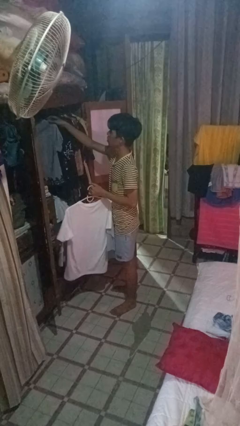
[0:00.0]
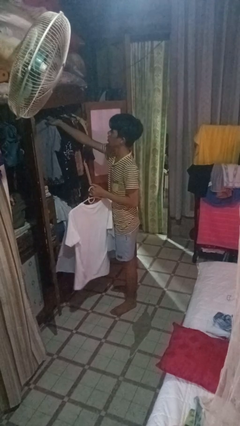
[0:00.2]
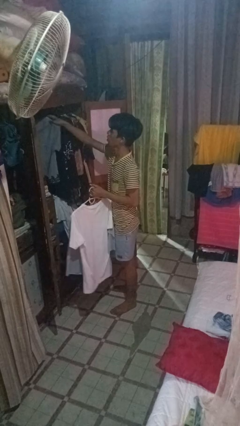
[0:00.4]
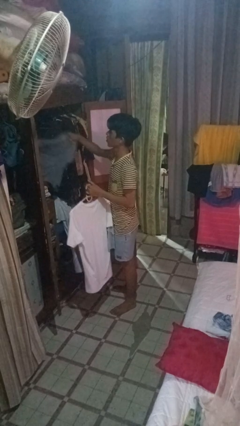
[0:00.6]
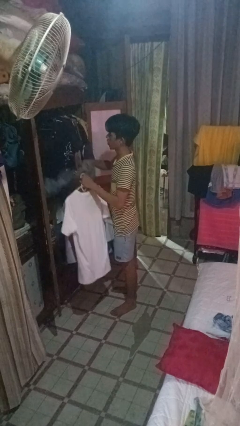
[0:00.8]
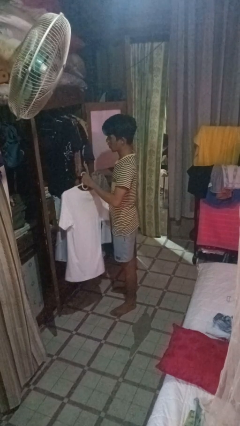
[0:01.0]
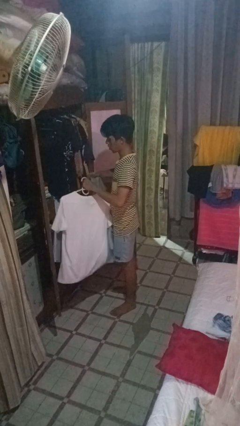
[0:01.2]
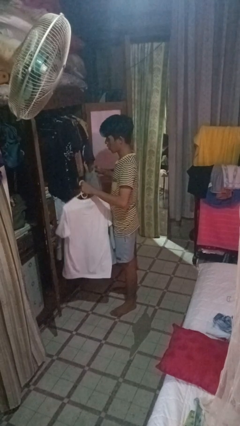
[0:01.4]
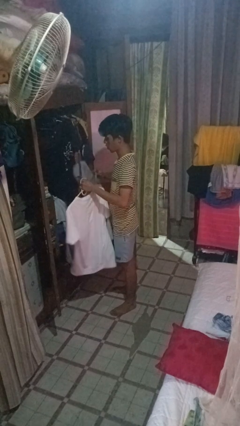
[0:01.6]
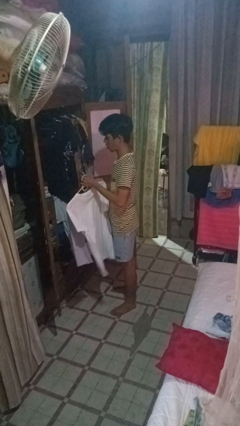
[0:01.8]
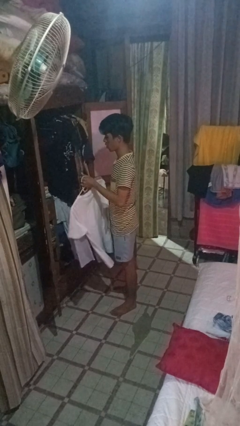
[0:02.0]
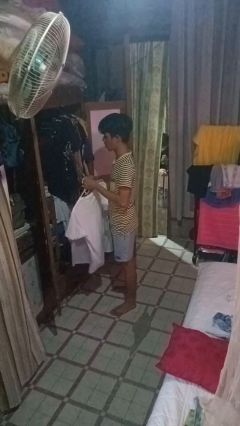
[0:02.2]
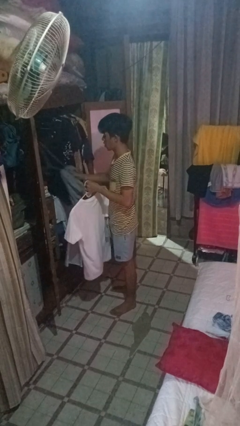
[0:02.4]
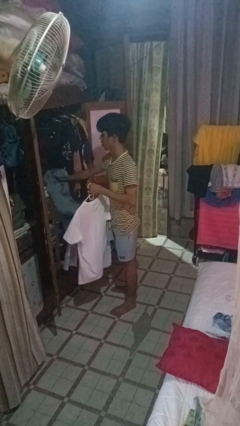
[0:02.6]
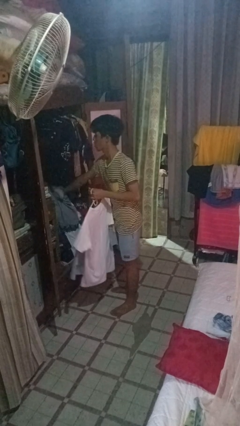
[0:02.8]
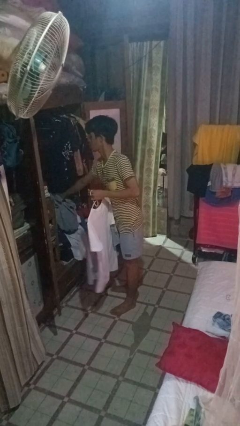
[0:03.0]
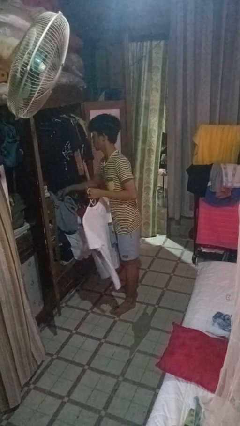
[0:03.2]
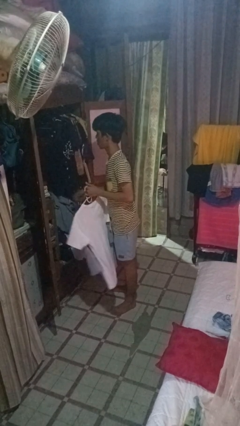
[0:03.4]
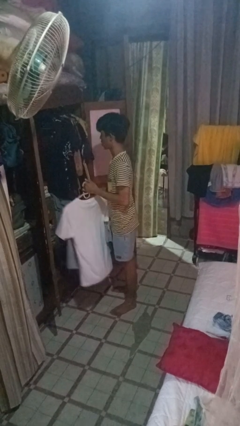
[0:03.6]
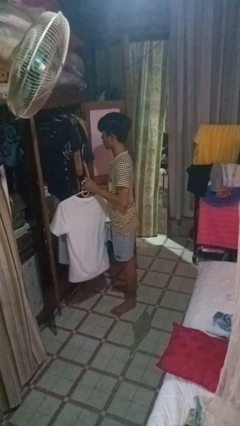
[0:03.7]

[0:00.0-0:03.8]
person takes clothes from closet

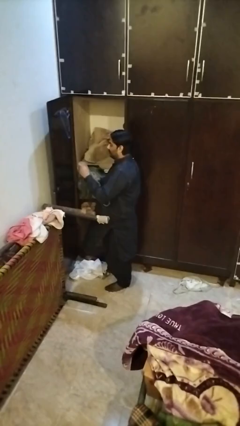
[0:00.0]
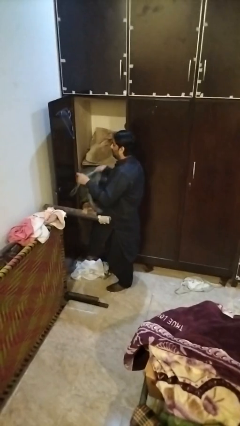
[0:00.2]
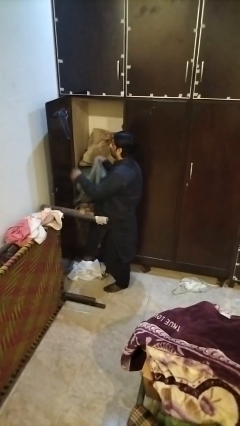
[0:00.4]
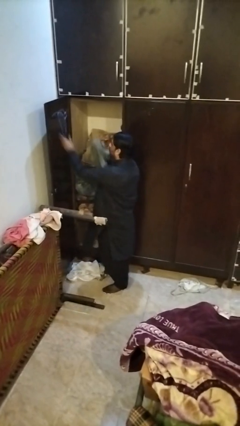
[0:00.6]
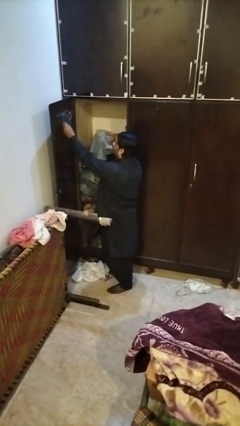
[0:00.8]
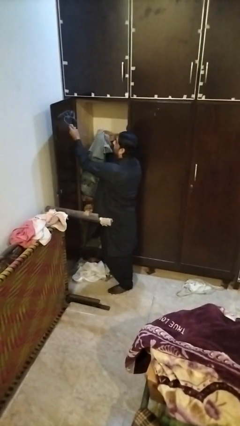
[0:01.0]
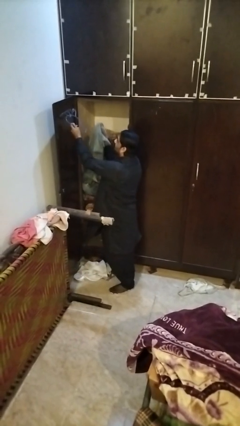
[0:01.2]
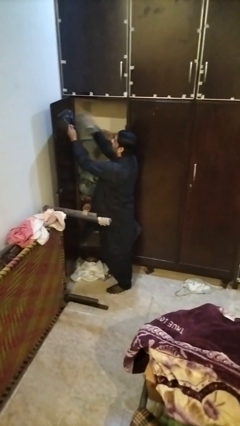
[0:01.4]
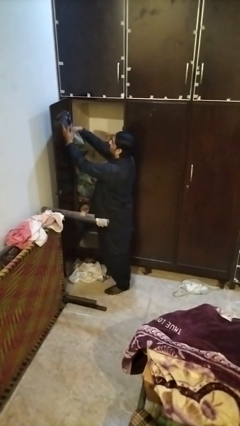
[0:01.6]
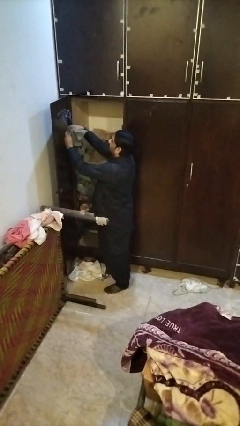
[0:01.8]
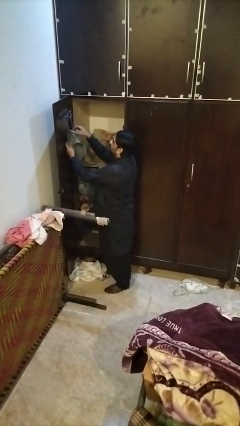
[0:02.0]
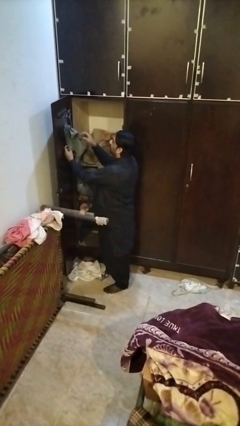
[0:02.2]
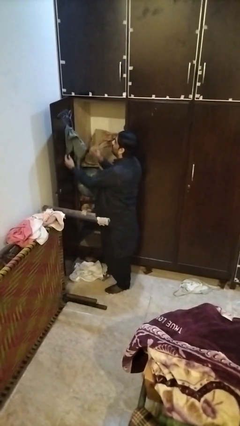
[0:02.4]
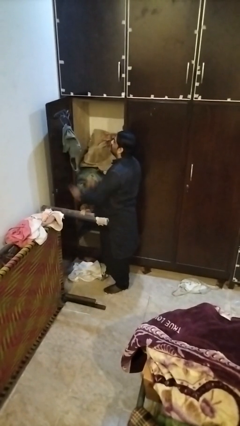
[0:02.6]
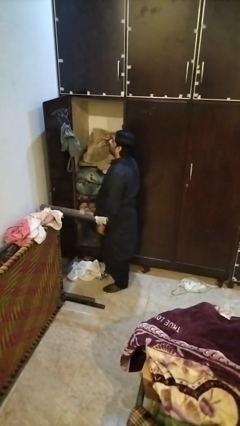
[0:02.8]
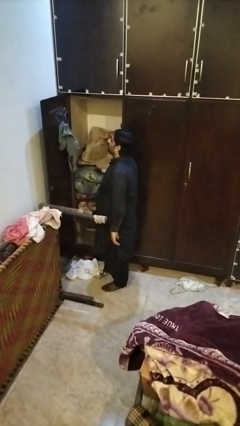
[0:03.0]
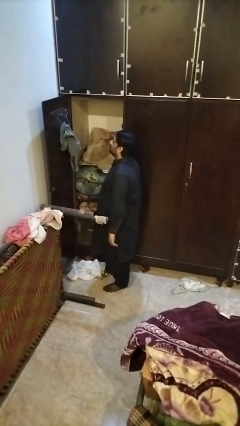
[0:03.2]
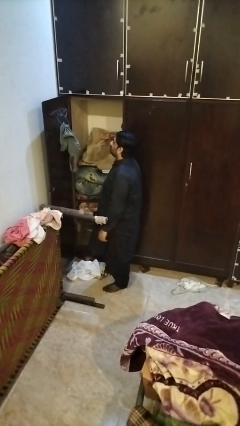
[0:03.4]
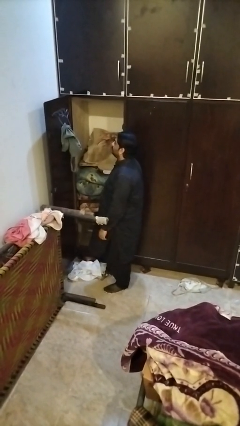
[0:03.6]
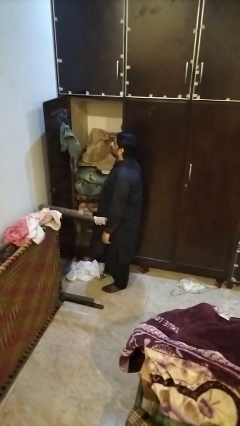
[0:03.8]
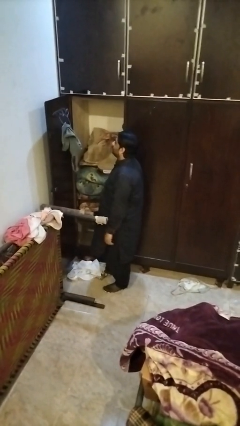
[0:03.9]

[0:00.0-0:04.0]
person puts clothes into closet

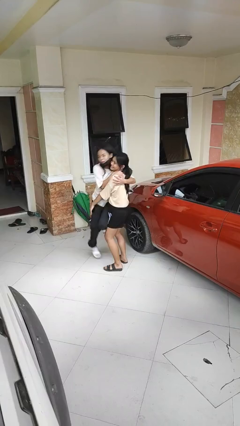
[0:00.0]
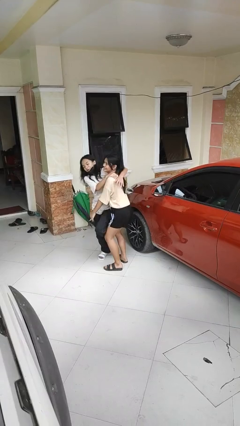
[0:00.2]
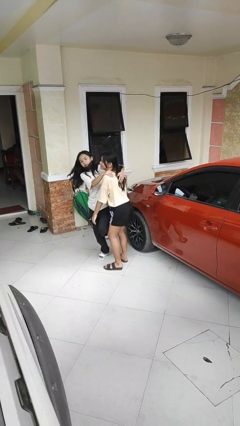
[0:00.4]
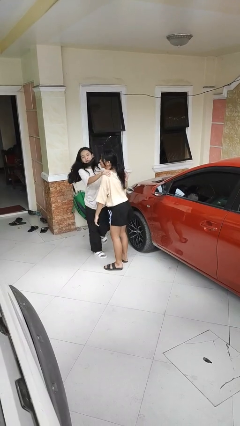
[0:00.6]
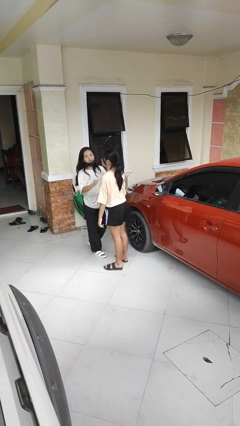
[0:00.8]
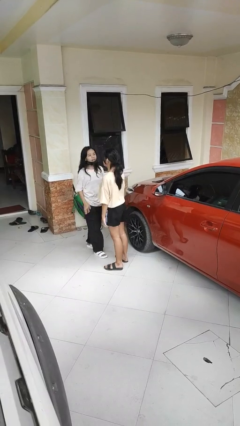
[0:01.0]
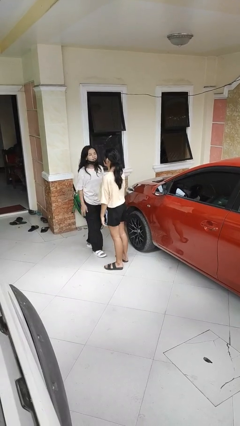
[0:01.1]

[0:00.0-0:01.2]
person puts down person

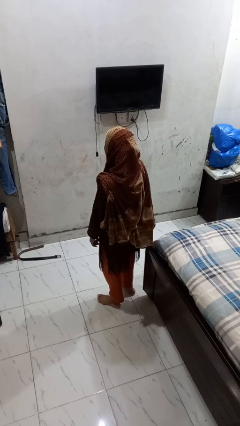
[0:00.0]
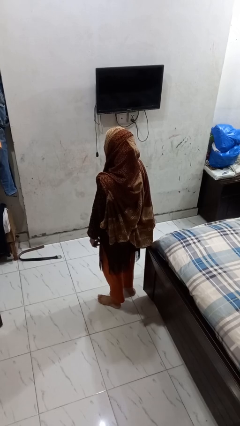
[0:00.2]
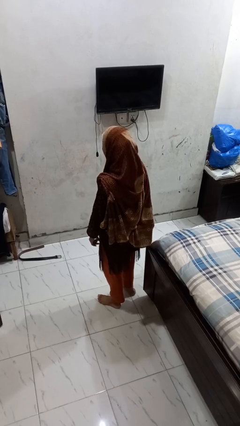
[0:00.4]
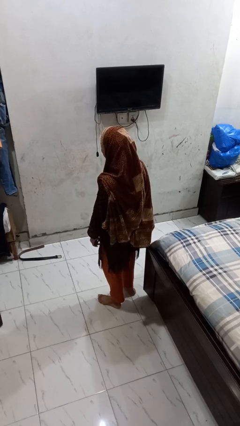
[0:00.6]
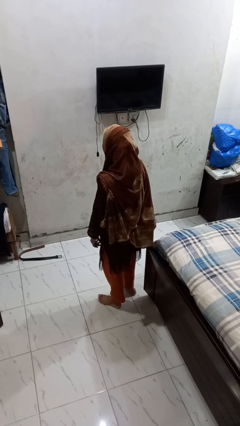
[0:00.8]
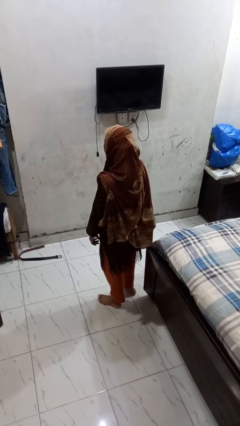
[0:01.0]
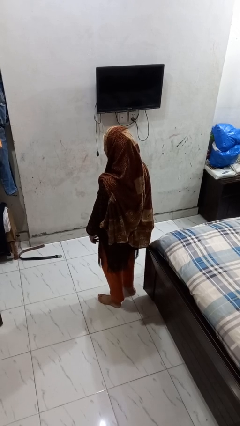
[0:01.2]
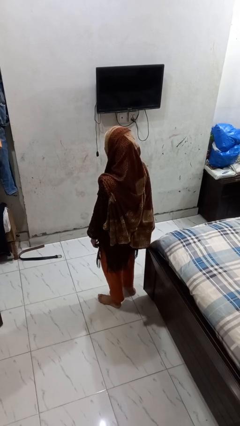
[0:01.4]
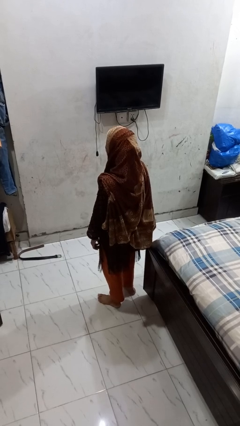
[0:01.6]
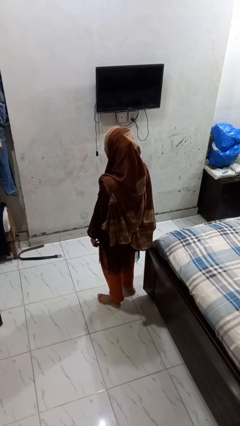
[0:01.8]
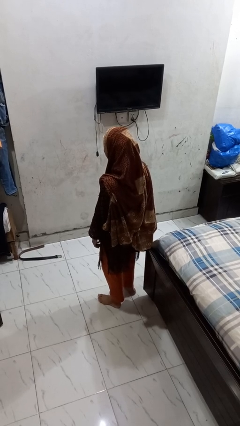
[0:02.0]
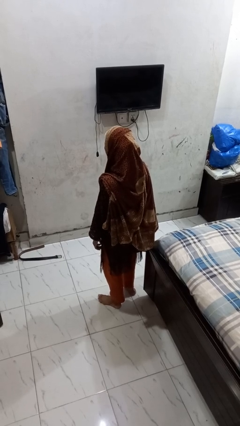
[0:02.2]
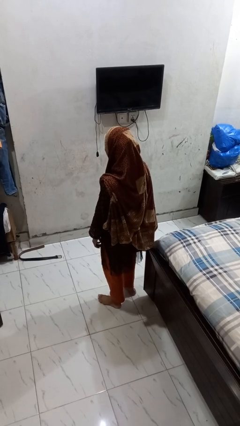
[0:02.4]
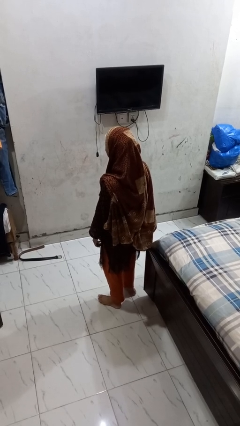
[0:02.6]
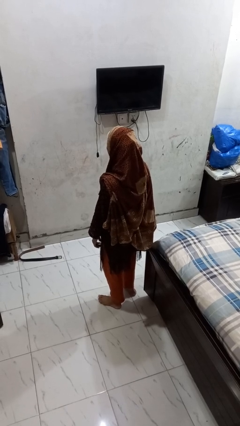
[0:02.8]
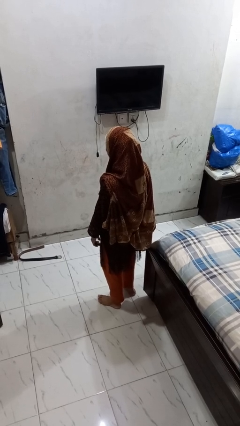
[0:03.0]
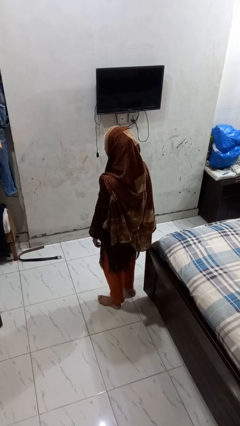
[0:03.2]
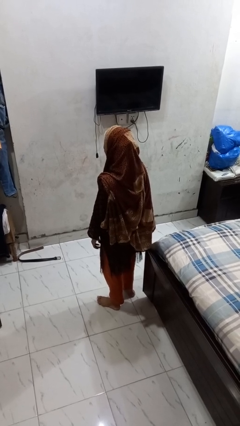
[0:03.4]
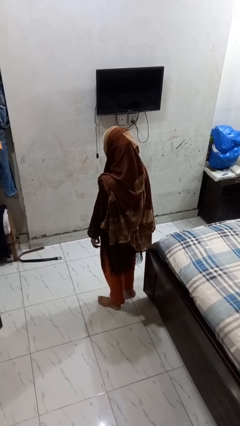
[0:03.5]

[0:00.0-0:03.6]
person nods head

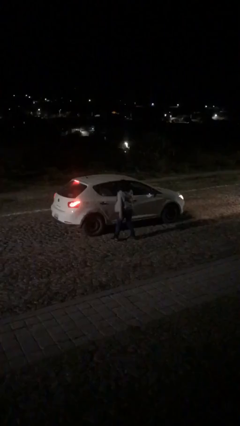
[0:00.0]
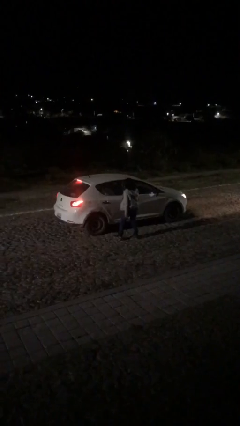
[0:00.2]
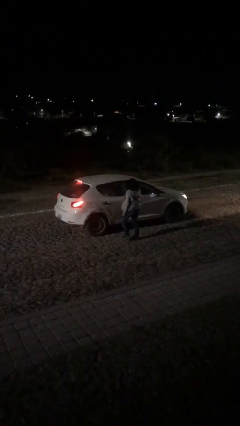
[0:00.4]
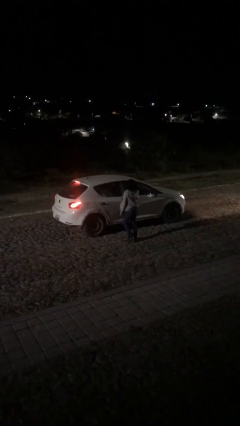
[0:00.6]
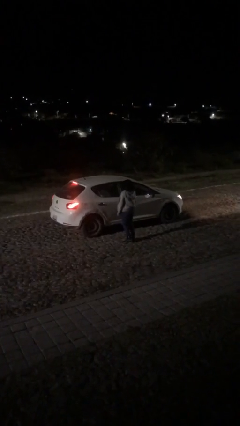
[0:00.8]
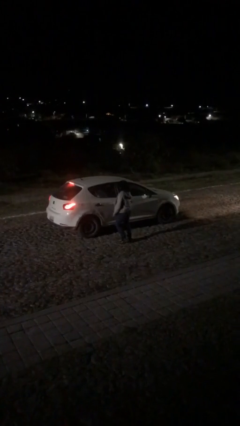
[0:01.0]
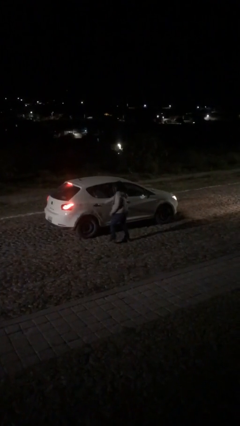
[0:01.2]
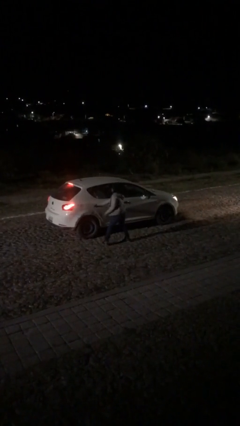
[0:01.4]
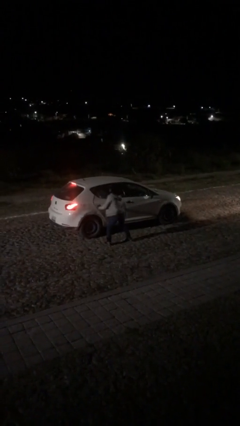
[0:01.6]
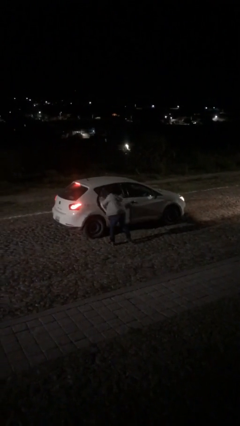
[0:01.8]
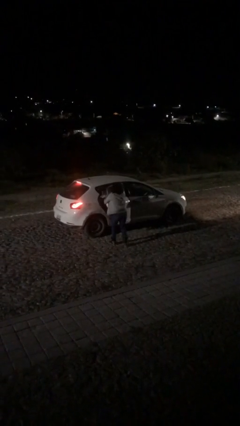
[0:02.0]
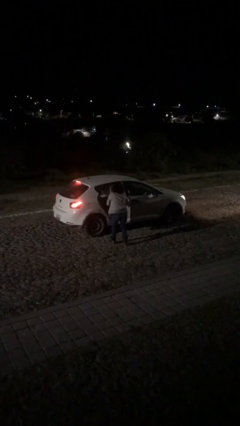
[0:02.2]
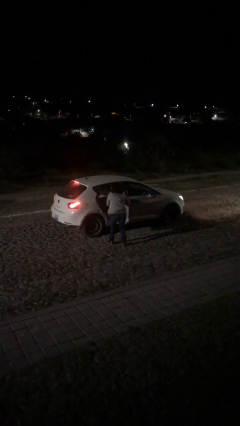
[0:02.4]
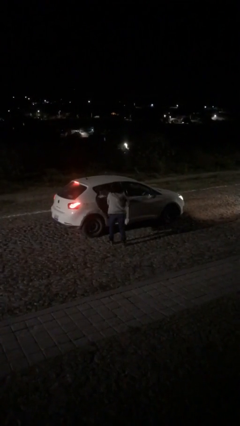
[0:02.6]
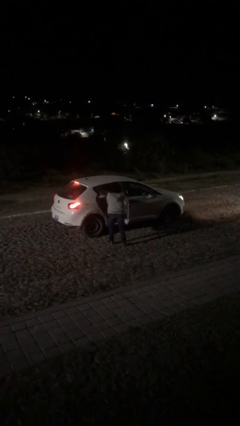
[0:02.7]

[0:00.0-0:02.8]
person opens car door

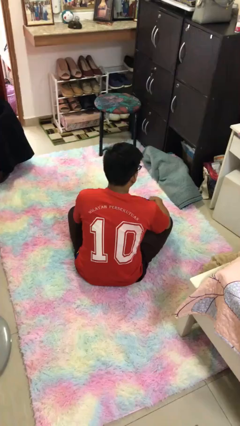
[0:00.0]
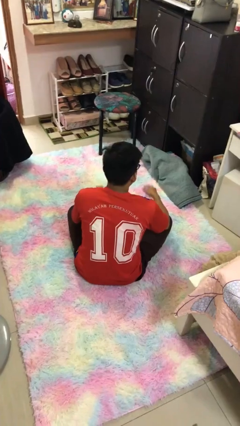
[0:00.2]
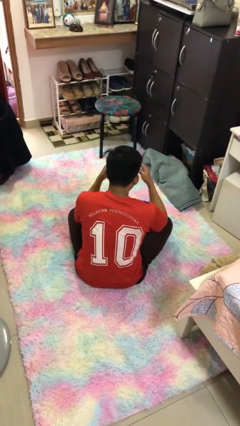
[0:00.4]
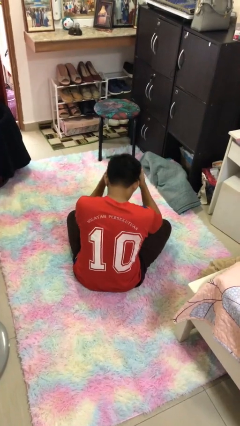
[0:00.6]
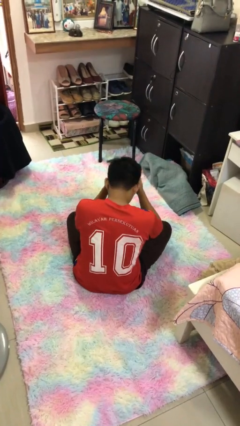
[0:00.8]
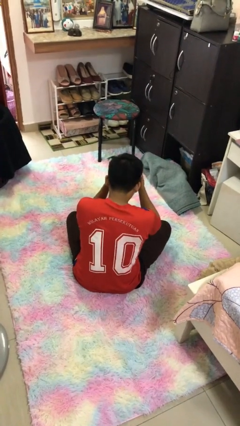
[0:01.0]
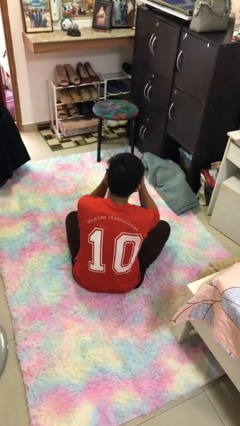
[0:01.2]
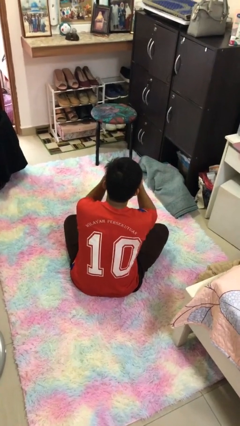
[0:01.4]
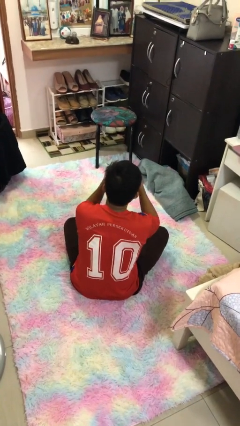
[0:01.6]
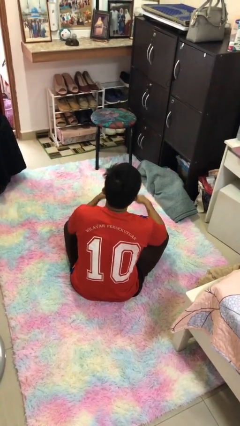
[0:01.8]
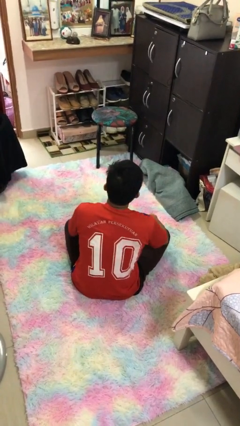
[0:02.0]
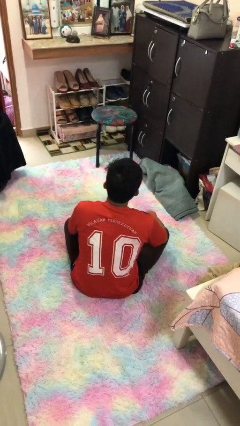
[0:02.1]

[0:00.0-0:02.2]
person covers face with hands
